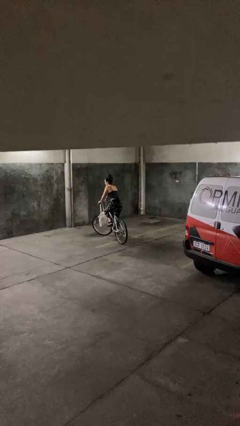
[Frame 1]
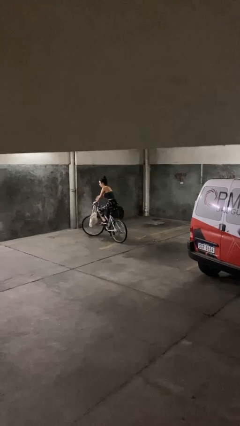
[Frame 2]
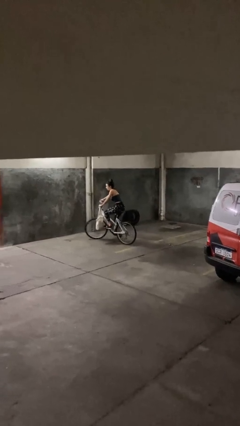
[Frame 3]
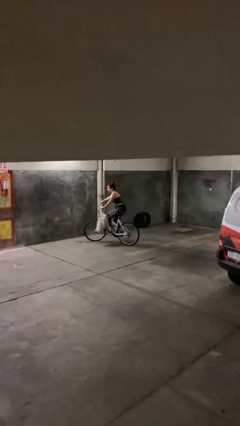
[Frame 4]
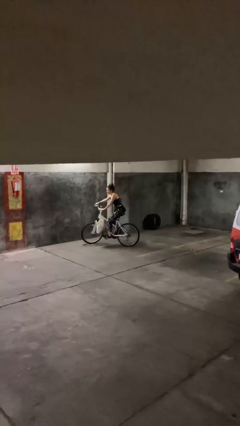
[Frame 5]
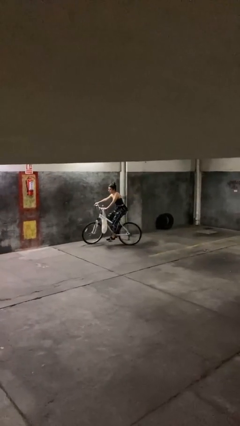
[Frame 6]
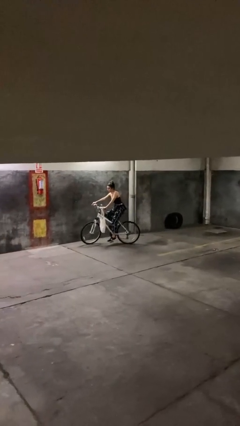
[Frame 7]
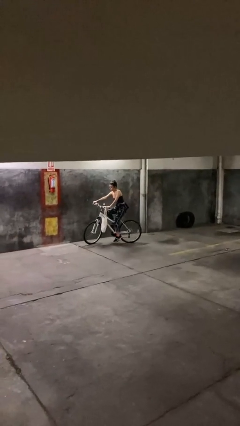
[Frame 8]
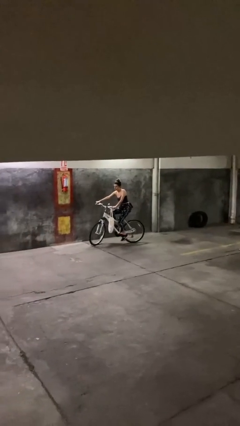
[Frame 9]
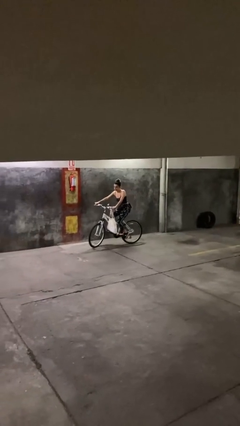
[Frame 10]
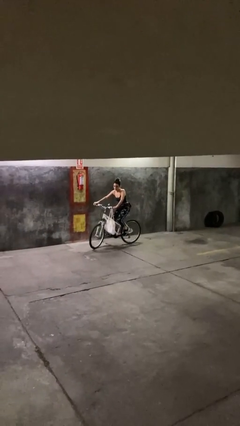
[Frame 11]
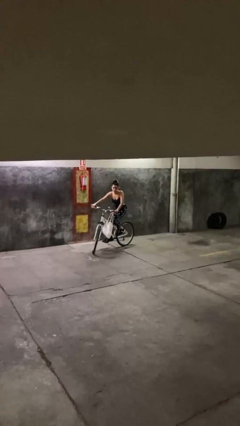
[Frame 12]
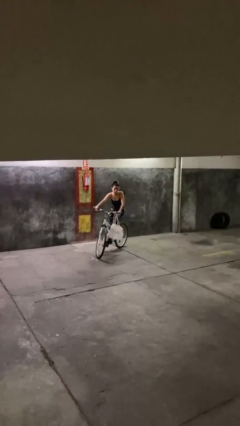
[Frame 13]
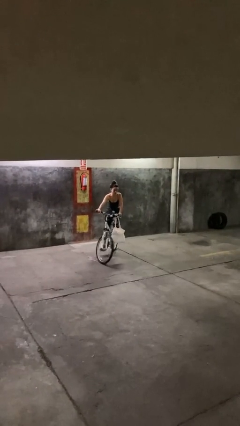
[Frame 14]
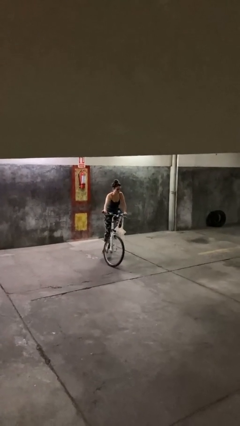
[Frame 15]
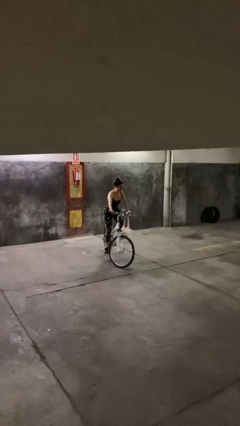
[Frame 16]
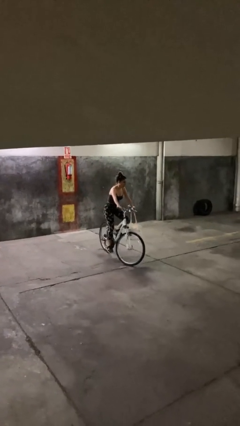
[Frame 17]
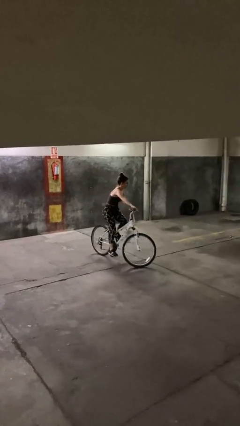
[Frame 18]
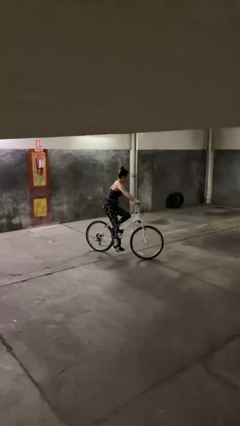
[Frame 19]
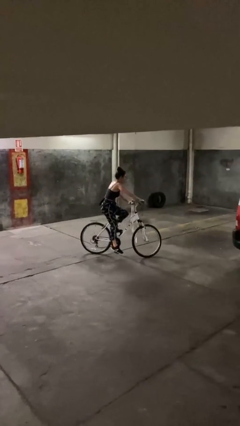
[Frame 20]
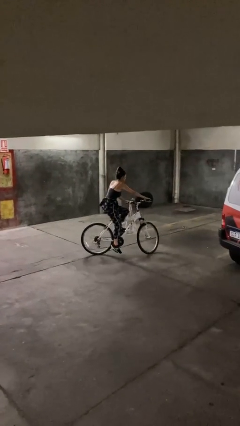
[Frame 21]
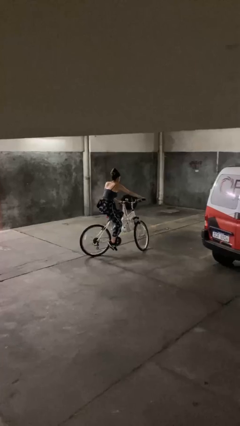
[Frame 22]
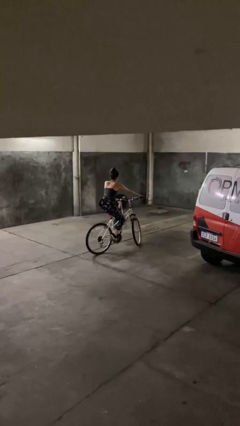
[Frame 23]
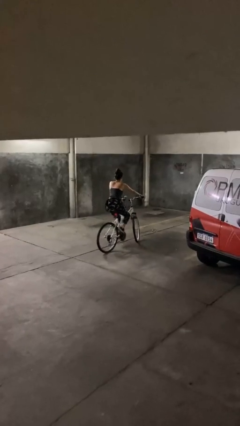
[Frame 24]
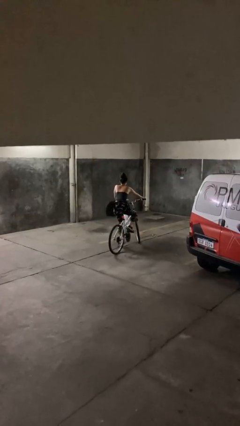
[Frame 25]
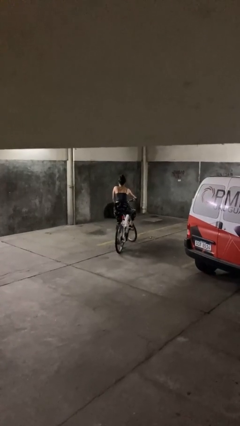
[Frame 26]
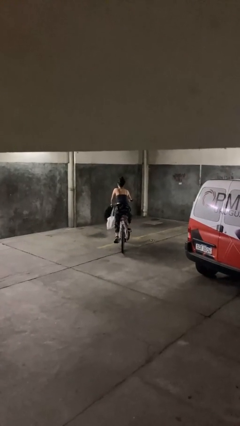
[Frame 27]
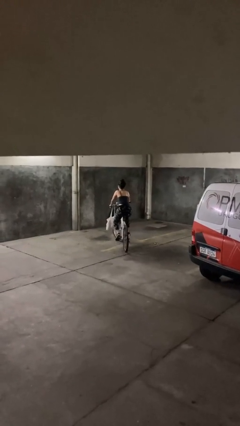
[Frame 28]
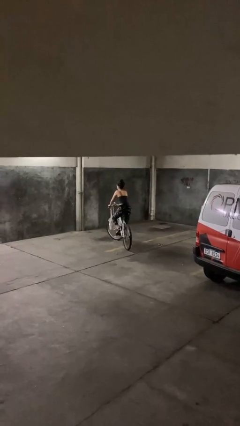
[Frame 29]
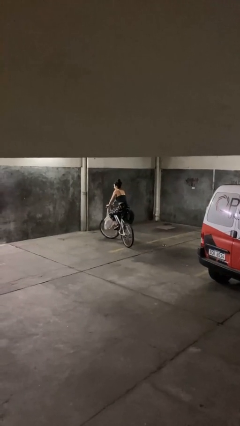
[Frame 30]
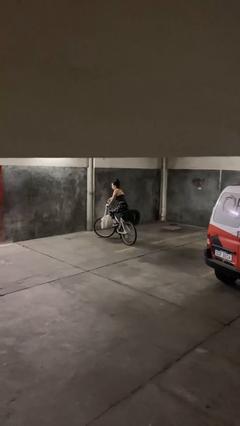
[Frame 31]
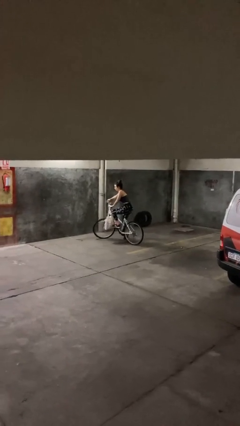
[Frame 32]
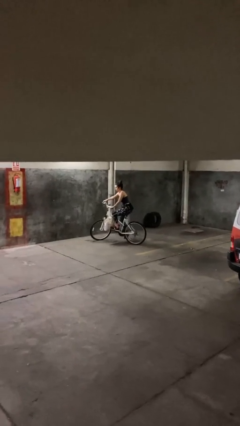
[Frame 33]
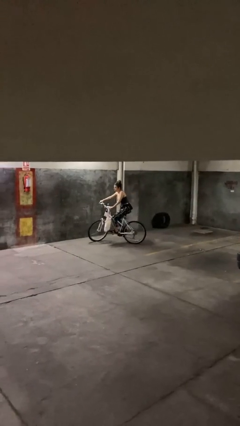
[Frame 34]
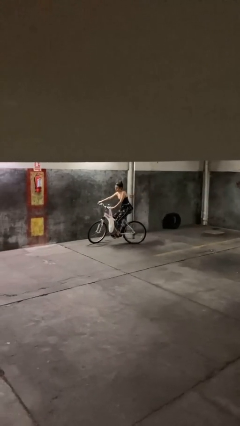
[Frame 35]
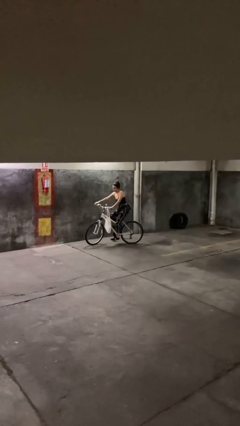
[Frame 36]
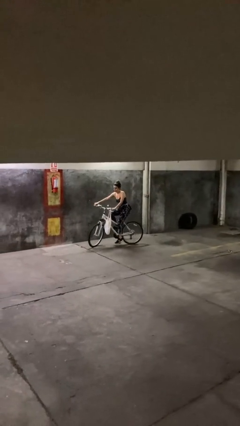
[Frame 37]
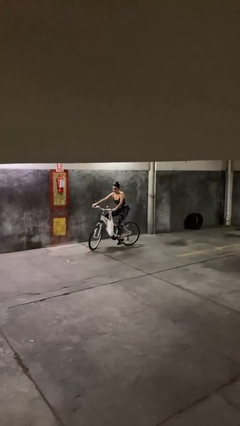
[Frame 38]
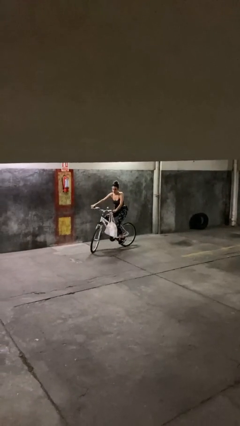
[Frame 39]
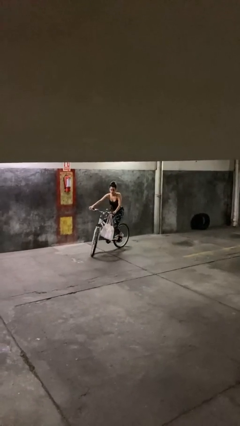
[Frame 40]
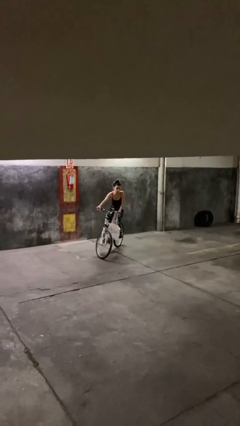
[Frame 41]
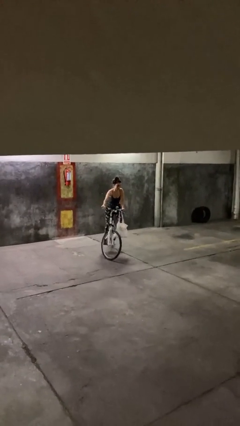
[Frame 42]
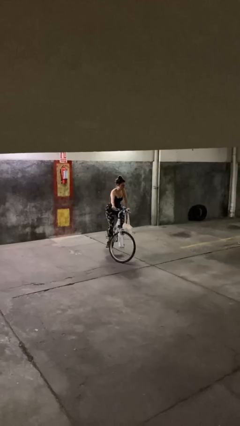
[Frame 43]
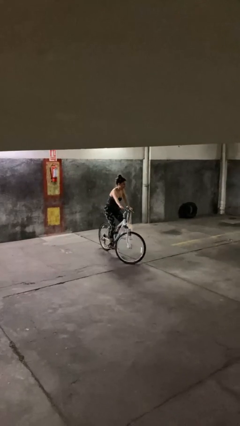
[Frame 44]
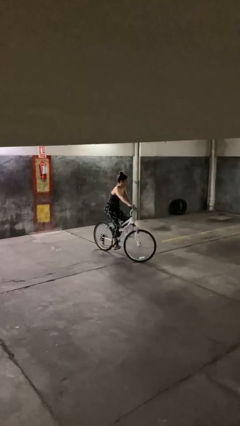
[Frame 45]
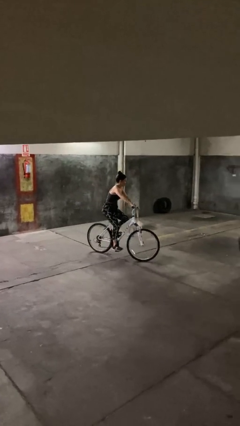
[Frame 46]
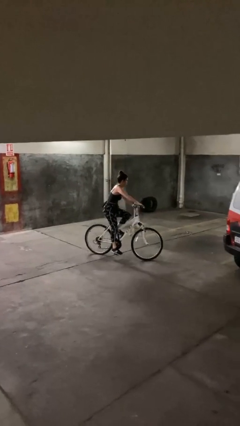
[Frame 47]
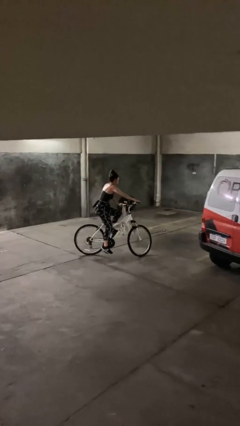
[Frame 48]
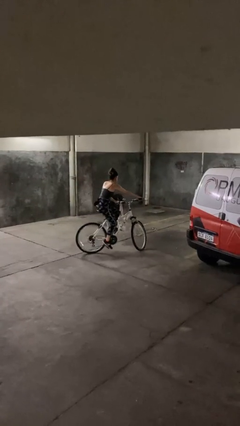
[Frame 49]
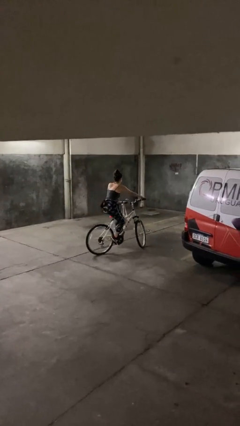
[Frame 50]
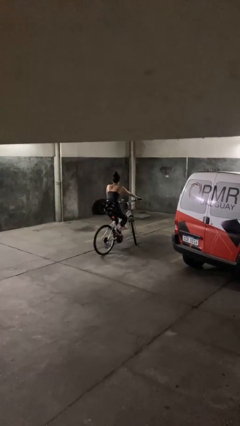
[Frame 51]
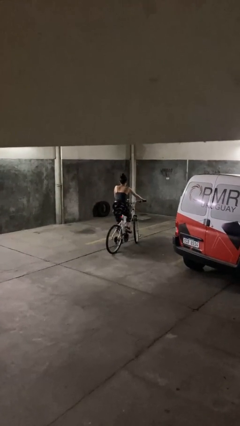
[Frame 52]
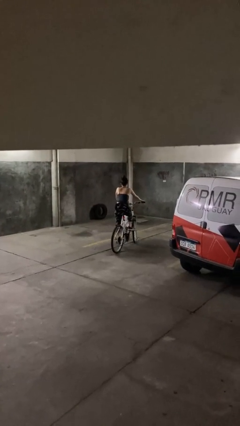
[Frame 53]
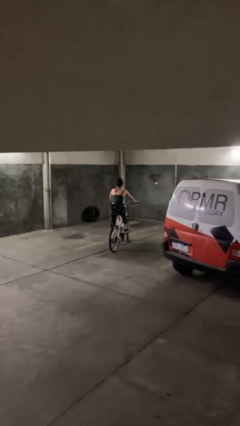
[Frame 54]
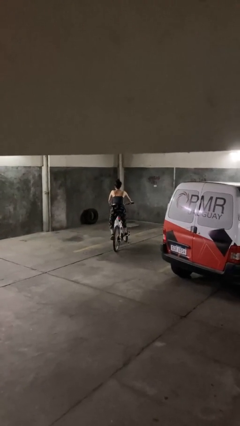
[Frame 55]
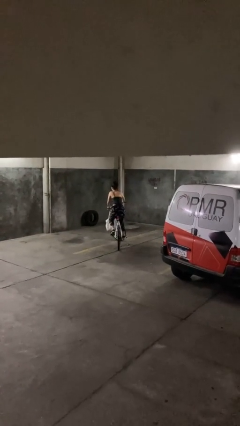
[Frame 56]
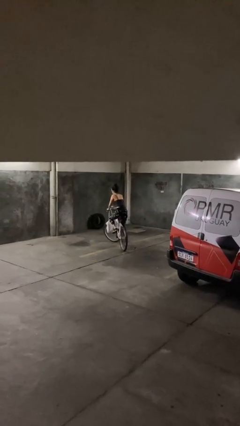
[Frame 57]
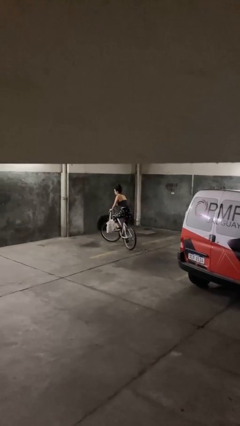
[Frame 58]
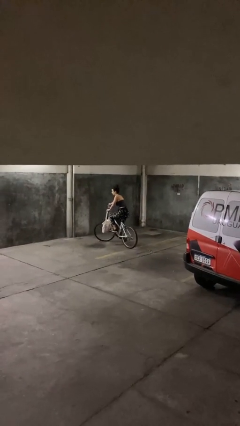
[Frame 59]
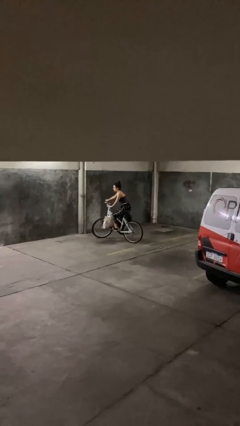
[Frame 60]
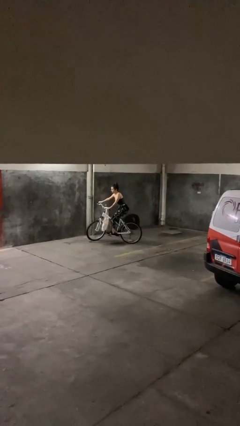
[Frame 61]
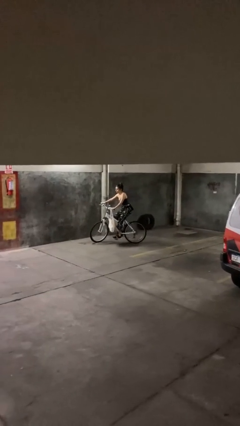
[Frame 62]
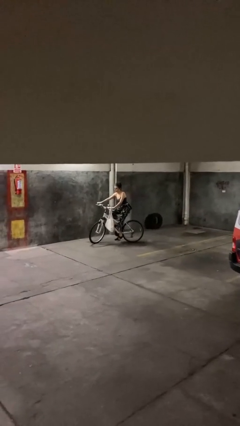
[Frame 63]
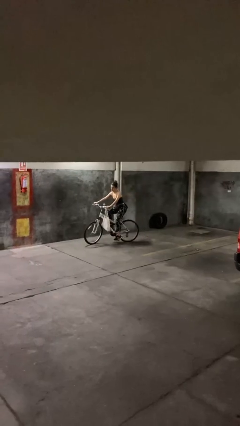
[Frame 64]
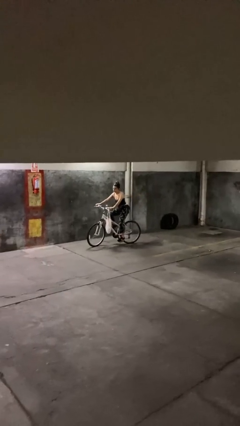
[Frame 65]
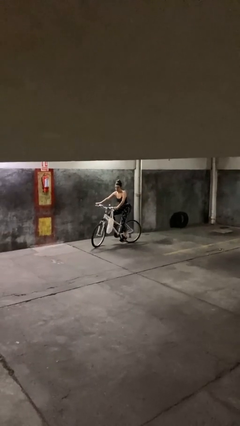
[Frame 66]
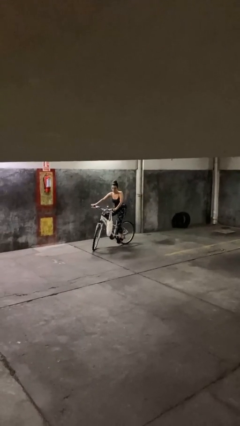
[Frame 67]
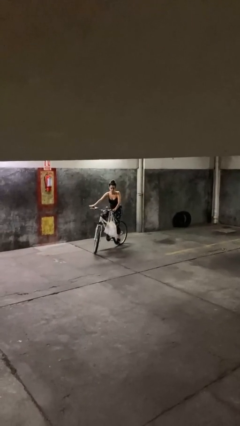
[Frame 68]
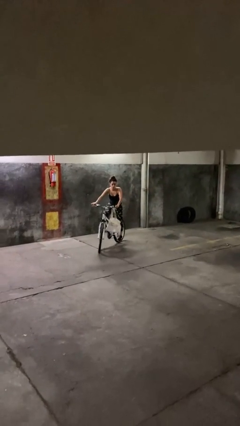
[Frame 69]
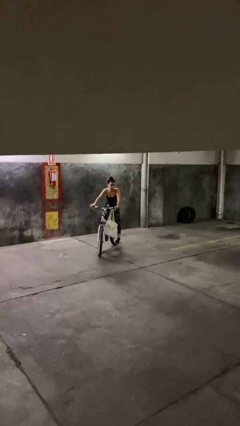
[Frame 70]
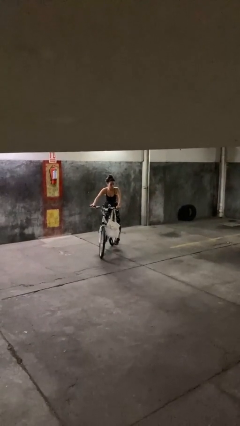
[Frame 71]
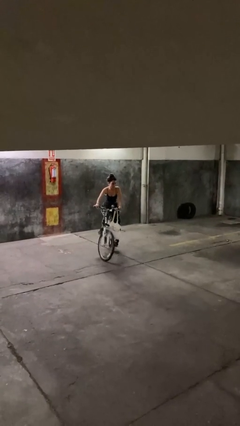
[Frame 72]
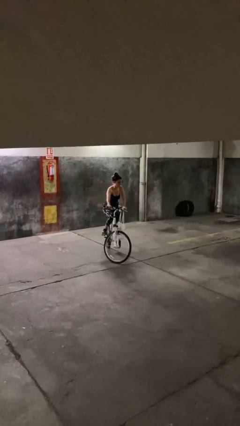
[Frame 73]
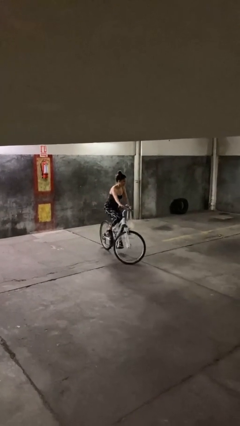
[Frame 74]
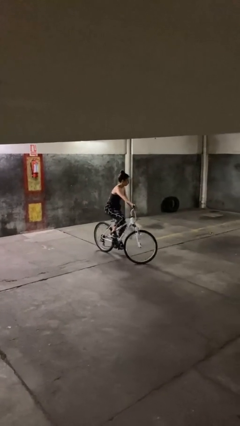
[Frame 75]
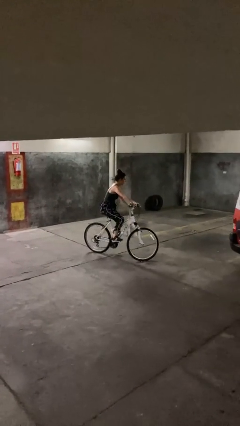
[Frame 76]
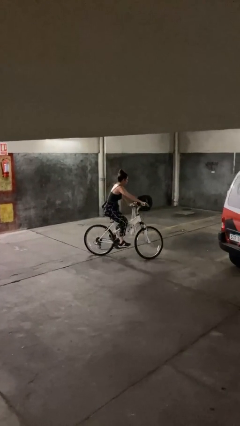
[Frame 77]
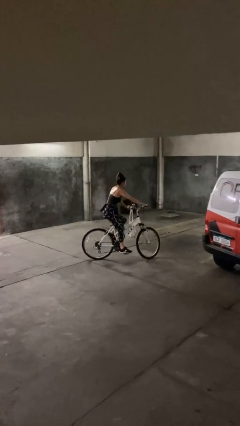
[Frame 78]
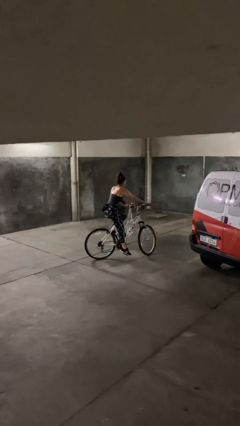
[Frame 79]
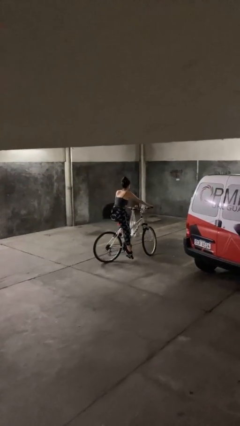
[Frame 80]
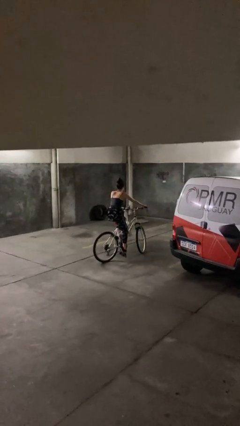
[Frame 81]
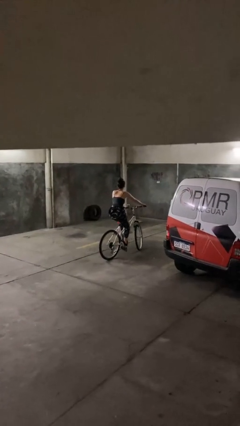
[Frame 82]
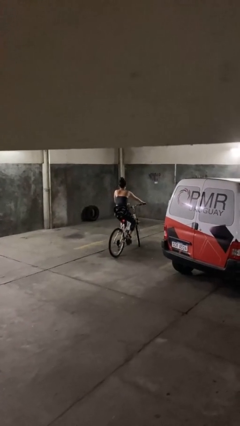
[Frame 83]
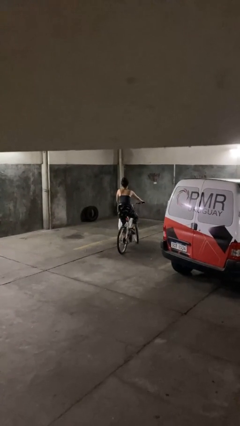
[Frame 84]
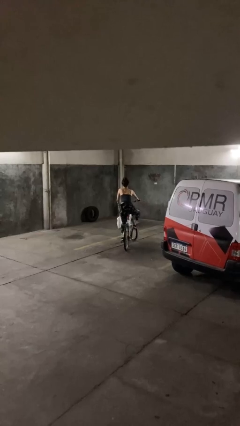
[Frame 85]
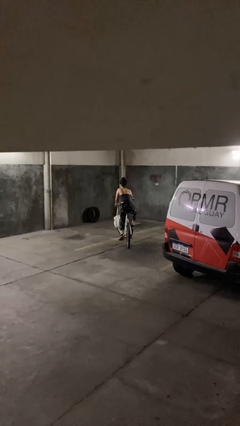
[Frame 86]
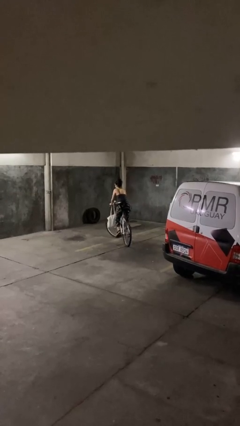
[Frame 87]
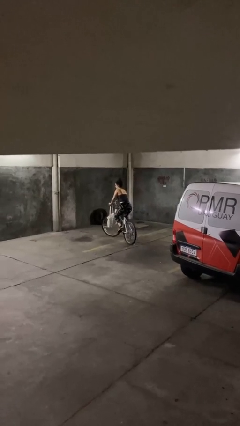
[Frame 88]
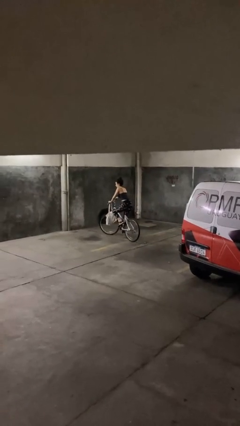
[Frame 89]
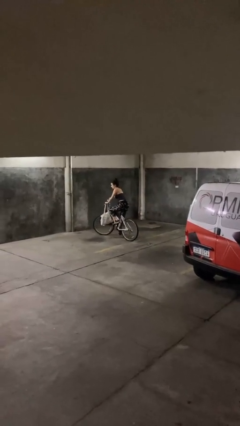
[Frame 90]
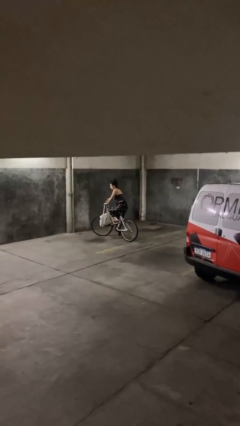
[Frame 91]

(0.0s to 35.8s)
person rides bicycle

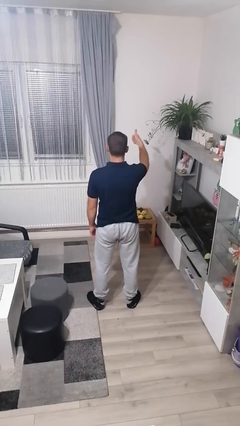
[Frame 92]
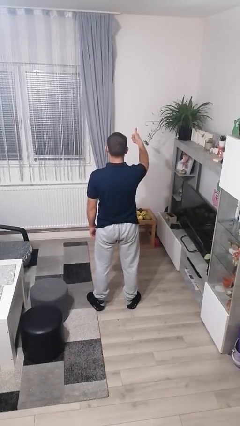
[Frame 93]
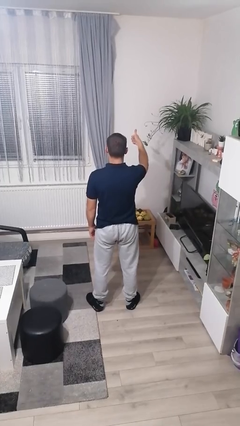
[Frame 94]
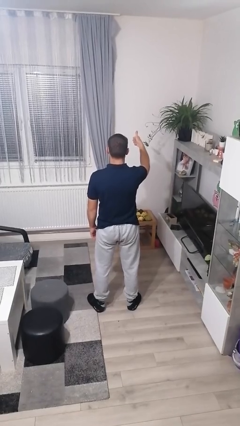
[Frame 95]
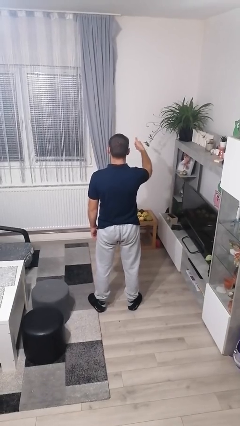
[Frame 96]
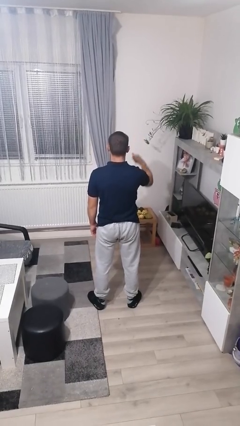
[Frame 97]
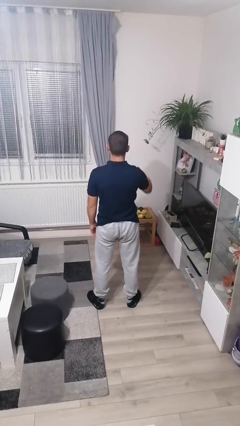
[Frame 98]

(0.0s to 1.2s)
person gestures number one
